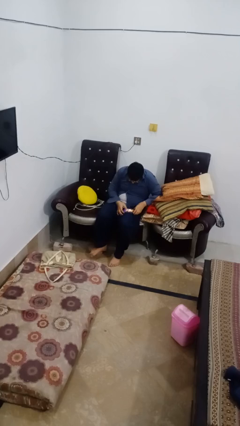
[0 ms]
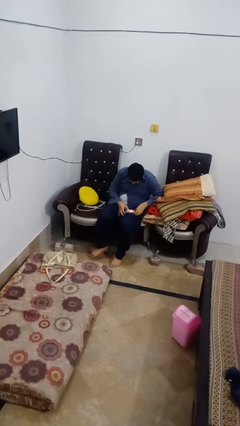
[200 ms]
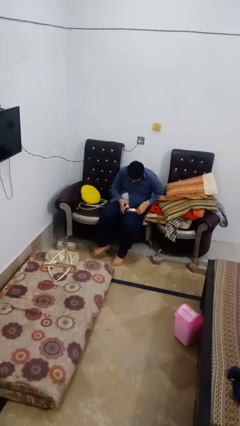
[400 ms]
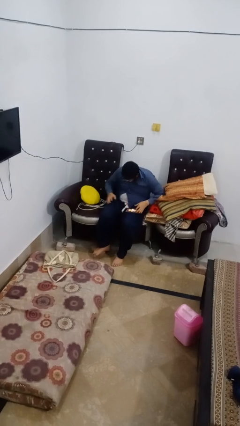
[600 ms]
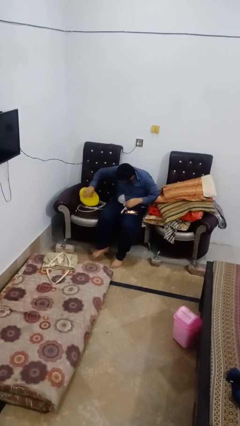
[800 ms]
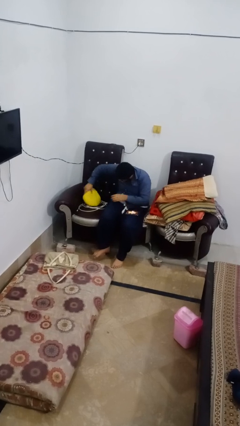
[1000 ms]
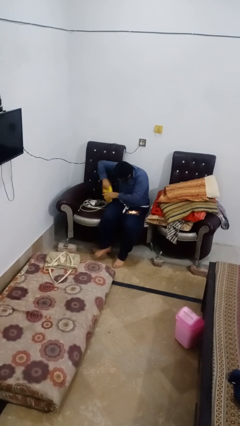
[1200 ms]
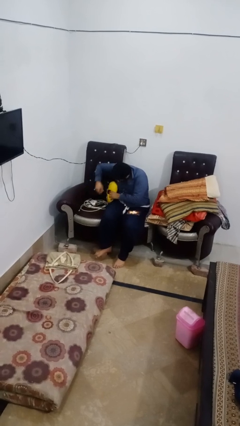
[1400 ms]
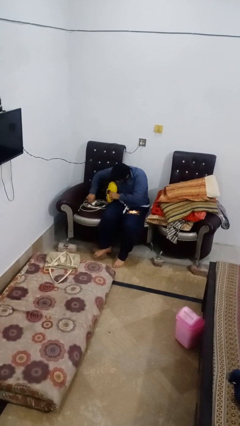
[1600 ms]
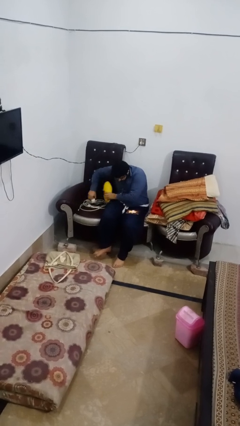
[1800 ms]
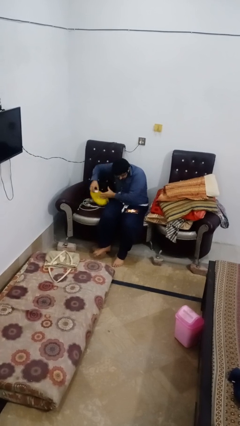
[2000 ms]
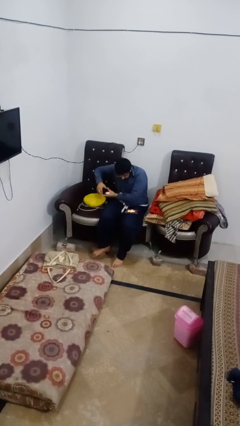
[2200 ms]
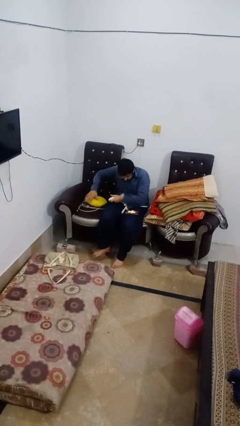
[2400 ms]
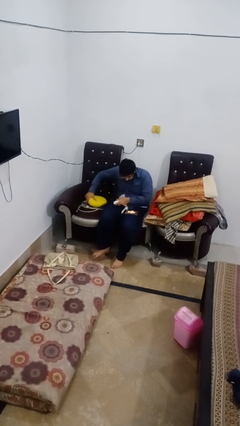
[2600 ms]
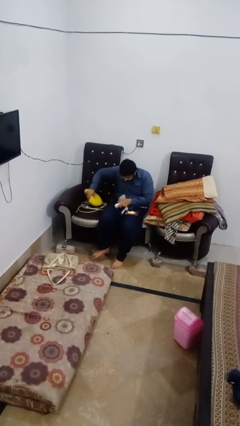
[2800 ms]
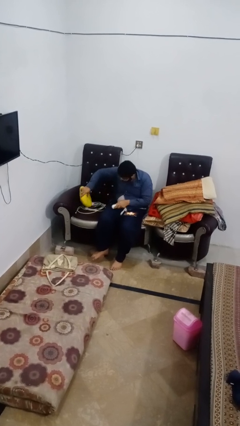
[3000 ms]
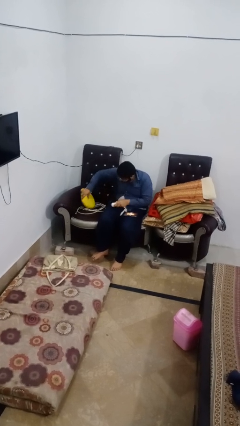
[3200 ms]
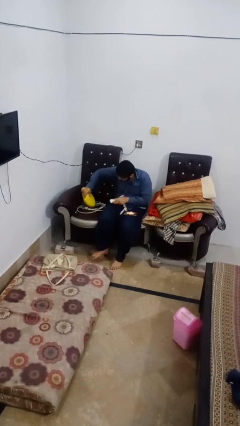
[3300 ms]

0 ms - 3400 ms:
person searches in couch

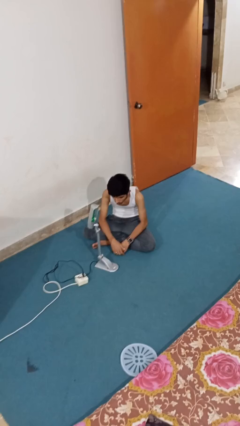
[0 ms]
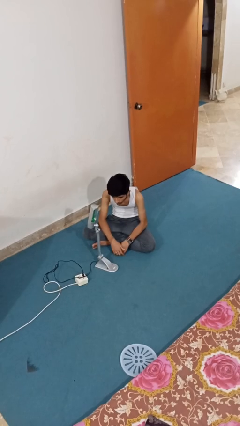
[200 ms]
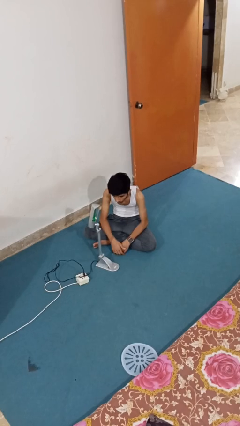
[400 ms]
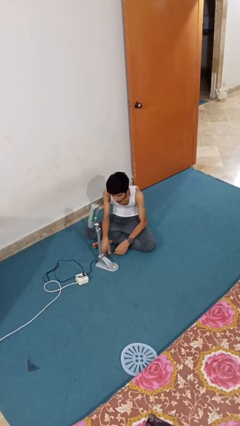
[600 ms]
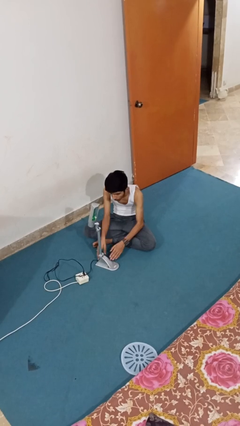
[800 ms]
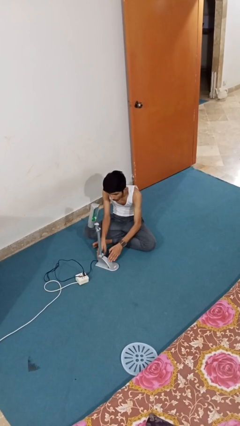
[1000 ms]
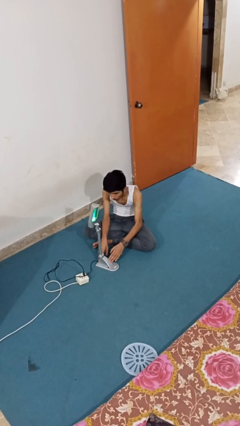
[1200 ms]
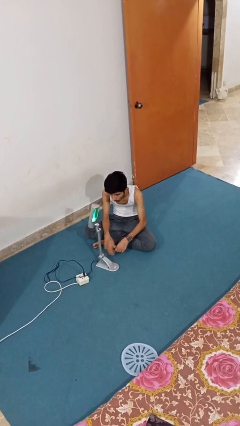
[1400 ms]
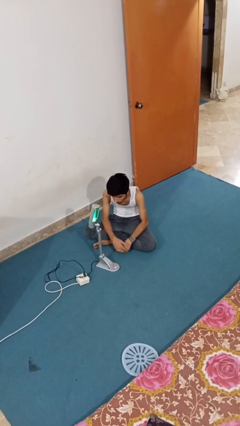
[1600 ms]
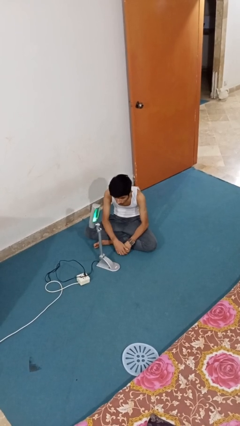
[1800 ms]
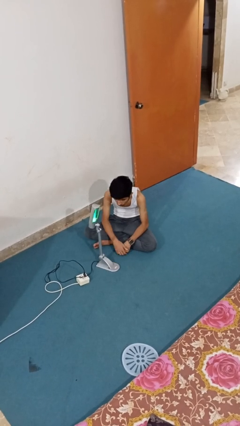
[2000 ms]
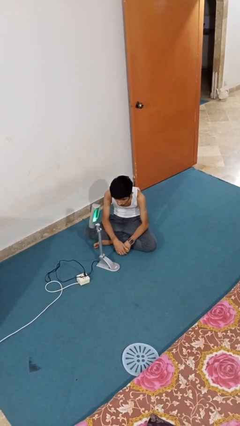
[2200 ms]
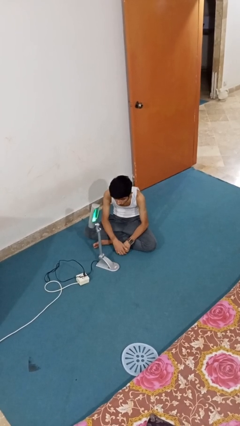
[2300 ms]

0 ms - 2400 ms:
person turns on lamp

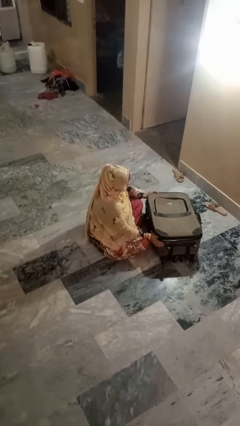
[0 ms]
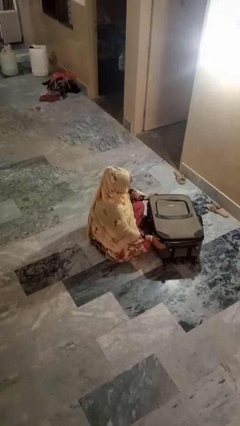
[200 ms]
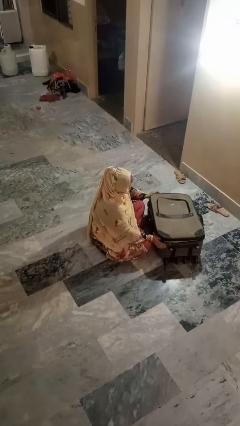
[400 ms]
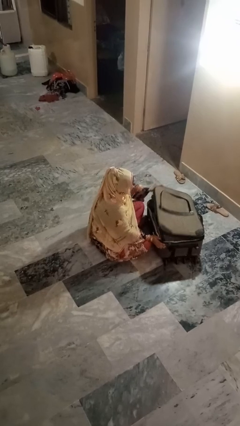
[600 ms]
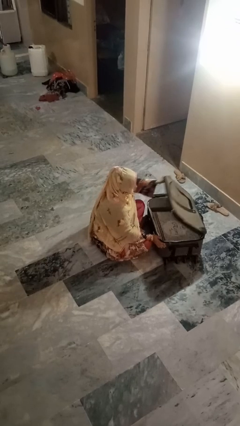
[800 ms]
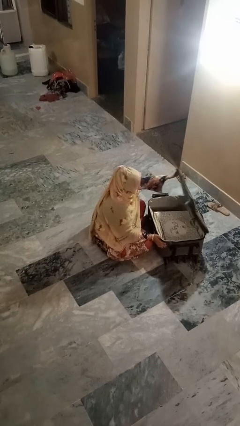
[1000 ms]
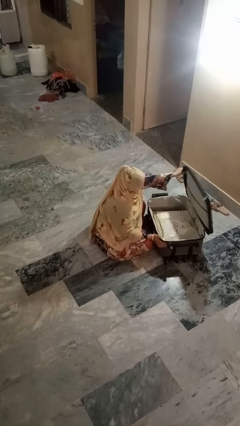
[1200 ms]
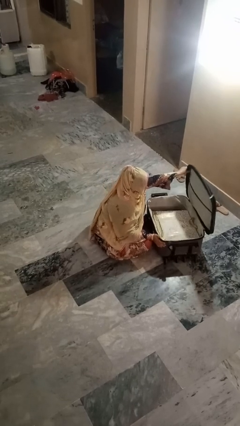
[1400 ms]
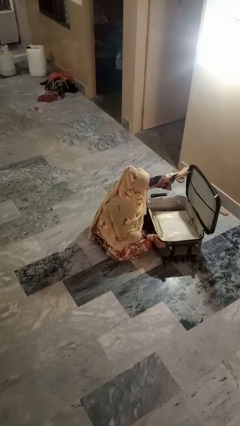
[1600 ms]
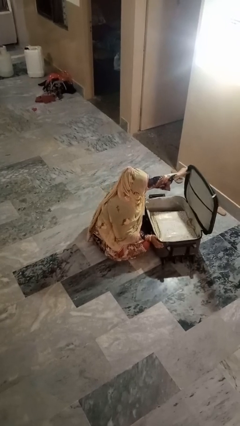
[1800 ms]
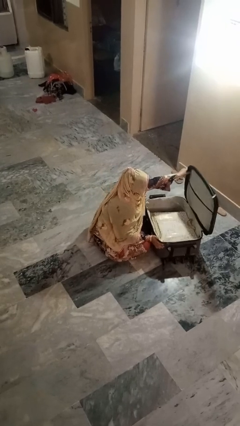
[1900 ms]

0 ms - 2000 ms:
person opens suitcase

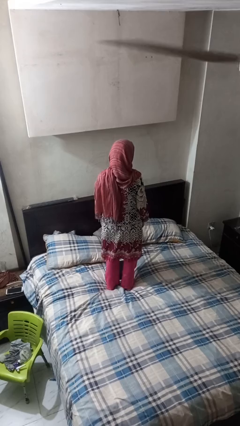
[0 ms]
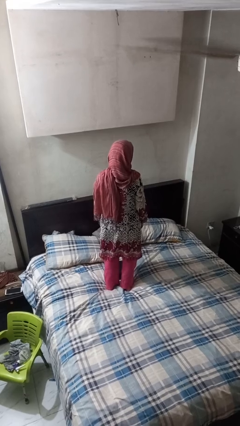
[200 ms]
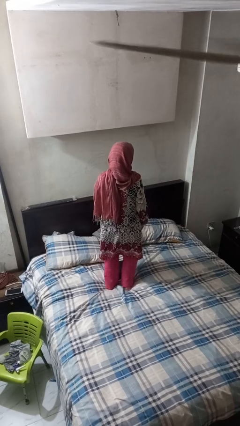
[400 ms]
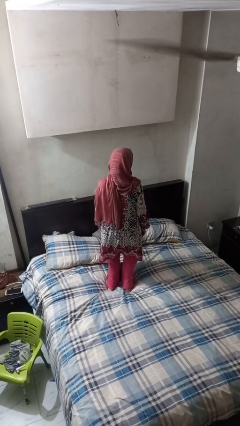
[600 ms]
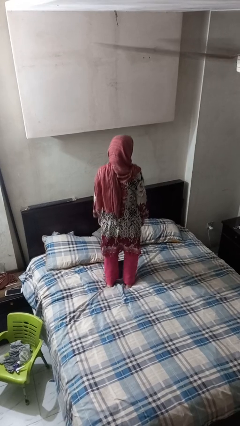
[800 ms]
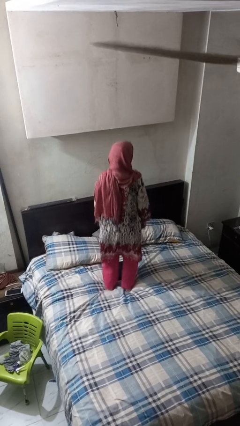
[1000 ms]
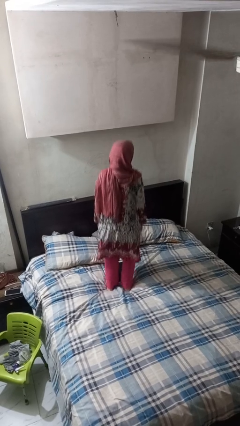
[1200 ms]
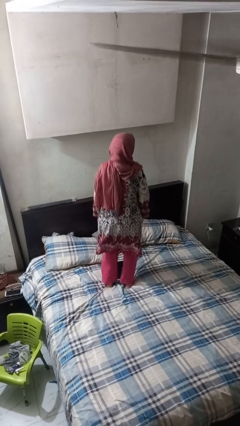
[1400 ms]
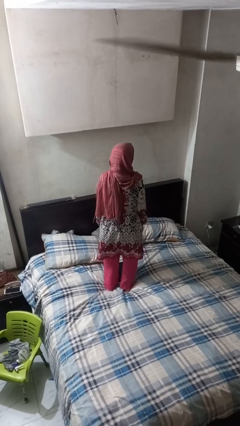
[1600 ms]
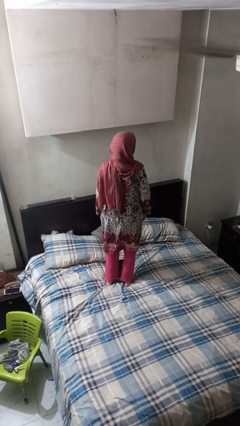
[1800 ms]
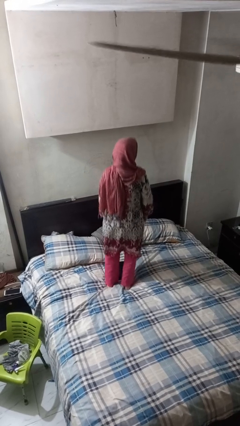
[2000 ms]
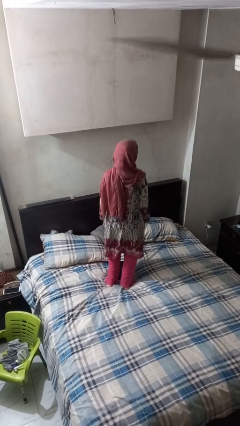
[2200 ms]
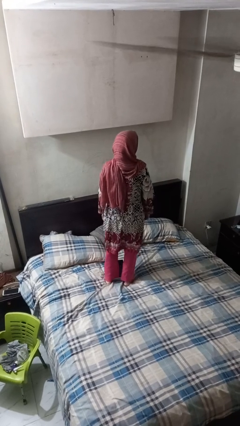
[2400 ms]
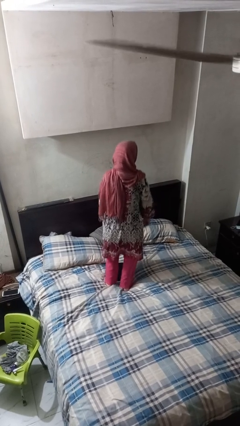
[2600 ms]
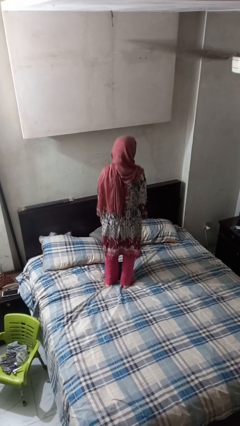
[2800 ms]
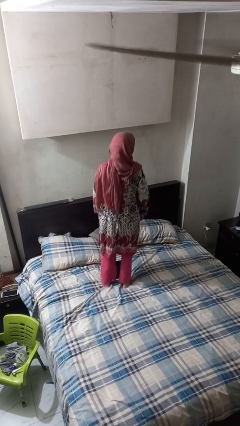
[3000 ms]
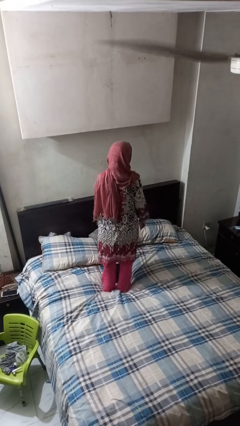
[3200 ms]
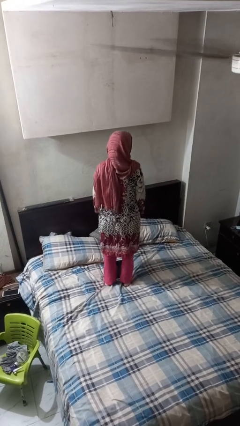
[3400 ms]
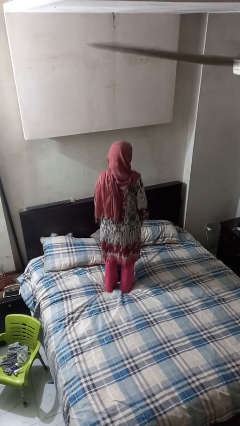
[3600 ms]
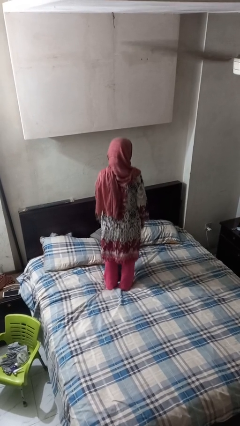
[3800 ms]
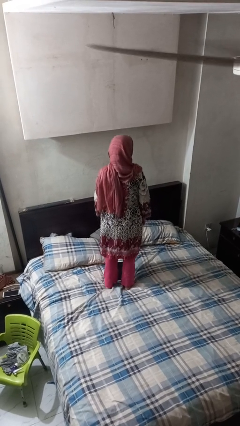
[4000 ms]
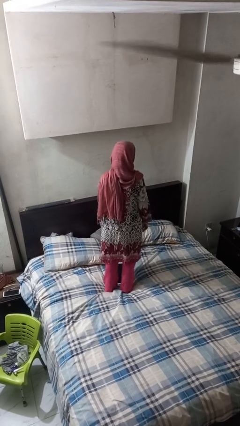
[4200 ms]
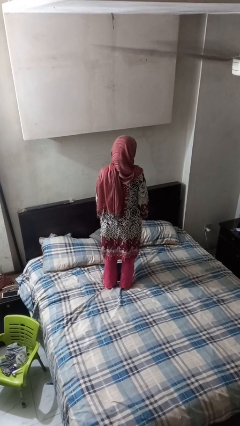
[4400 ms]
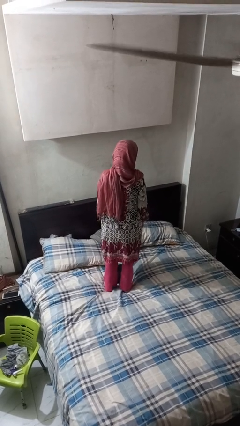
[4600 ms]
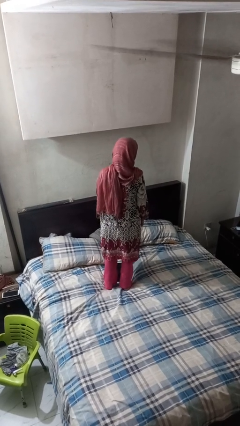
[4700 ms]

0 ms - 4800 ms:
person jumps on bed

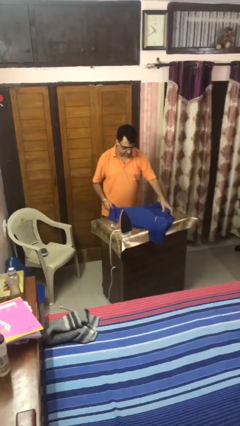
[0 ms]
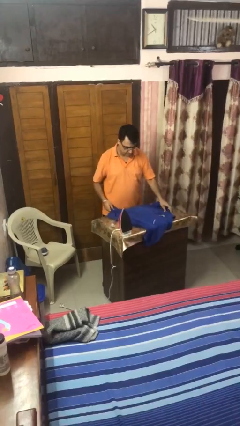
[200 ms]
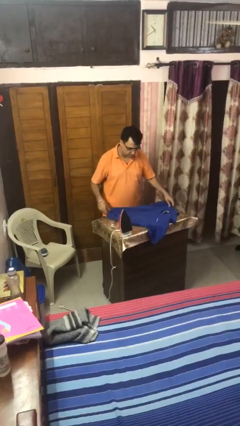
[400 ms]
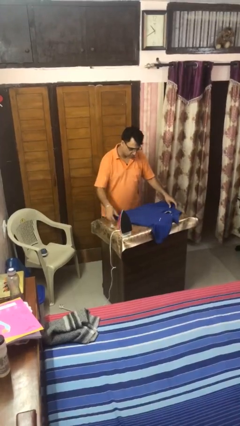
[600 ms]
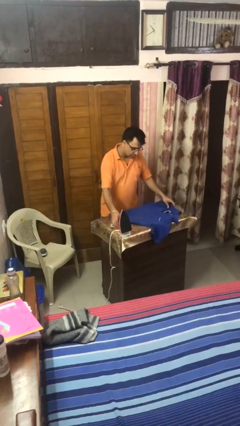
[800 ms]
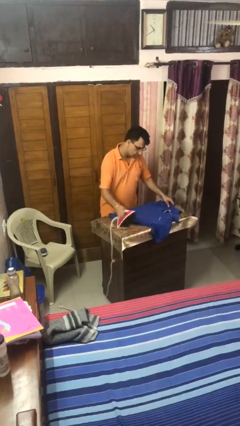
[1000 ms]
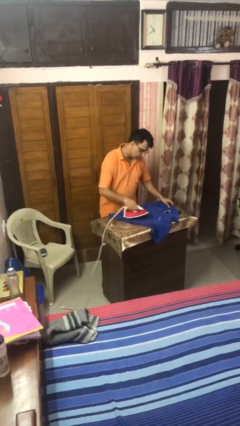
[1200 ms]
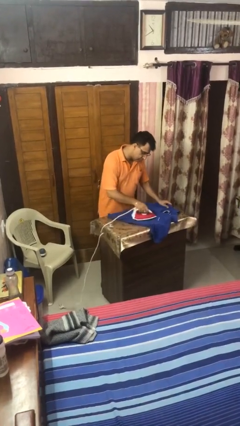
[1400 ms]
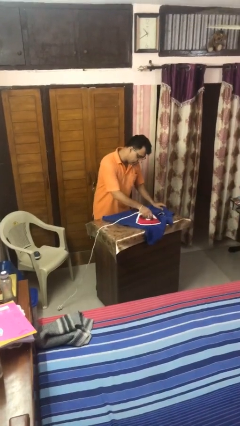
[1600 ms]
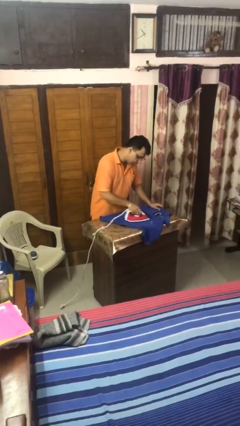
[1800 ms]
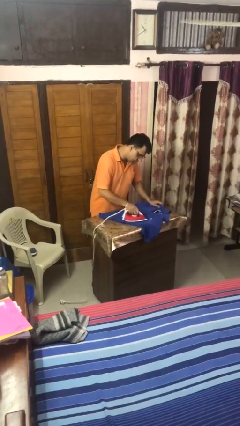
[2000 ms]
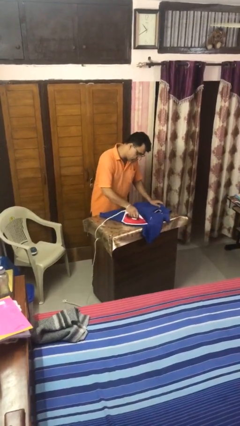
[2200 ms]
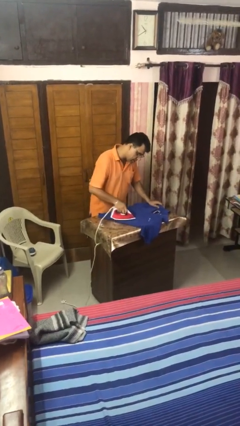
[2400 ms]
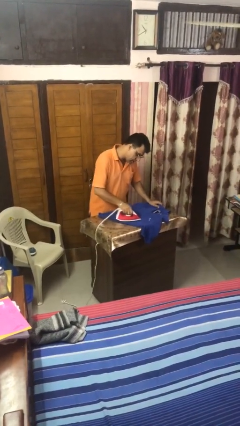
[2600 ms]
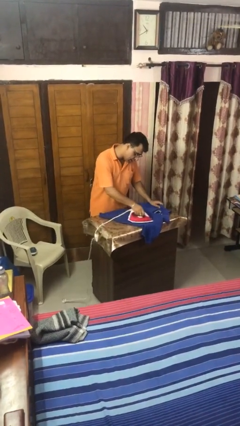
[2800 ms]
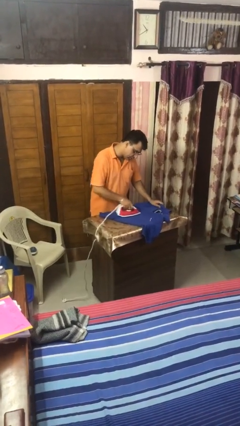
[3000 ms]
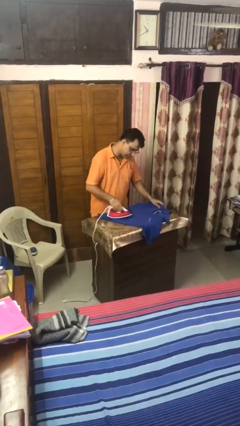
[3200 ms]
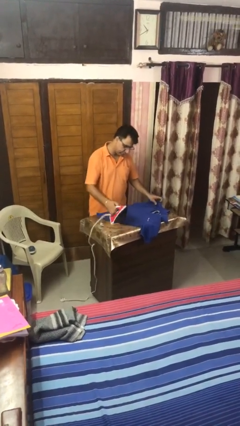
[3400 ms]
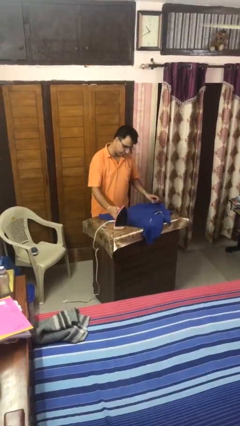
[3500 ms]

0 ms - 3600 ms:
person irons clothes

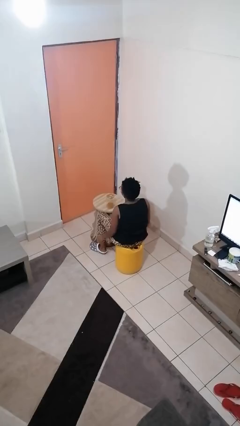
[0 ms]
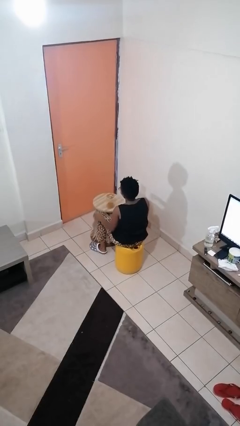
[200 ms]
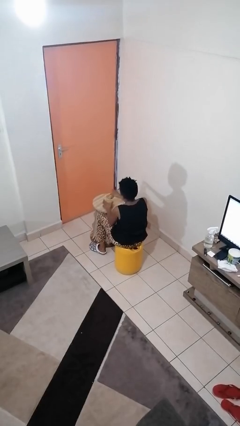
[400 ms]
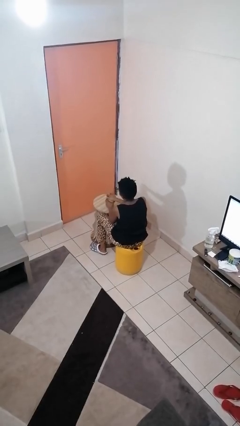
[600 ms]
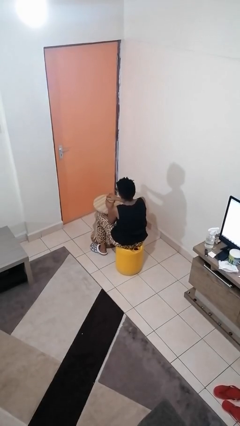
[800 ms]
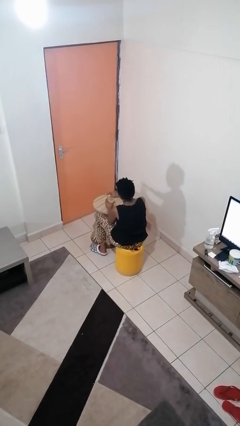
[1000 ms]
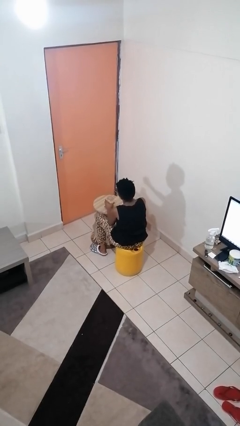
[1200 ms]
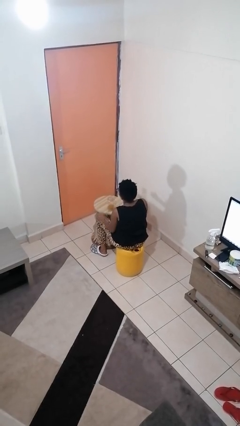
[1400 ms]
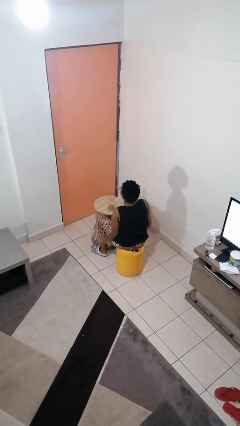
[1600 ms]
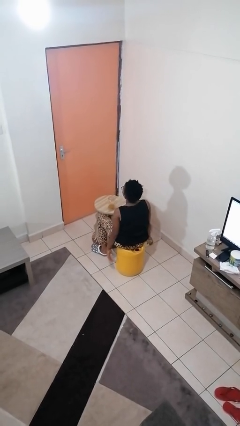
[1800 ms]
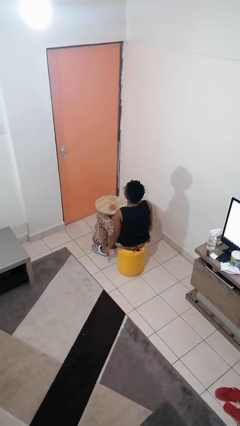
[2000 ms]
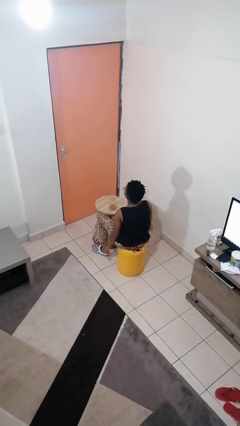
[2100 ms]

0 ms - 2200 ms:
person opens jar
